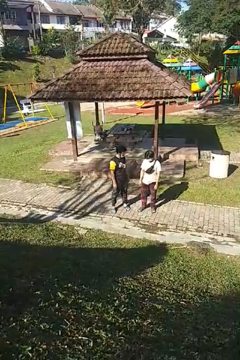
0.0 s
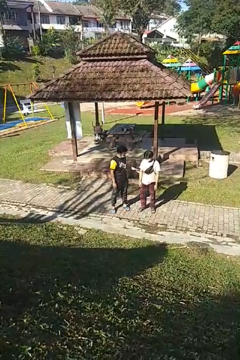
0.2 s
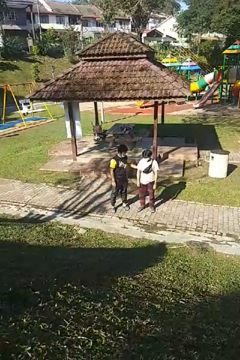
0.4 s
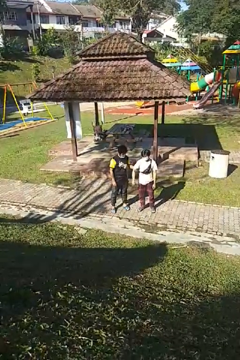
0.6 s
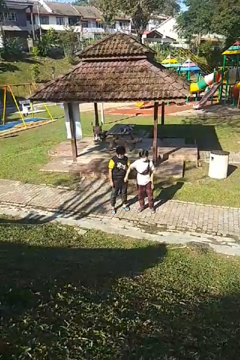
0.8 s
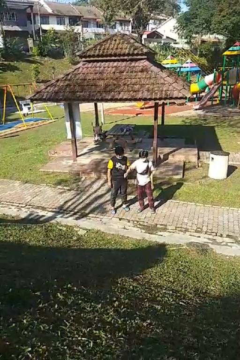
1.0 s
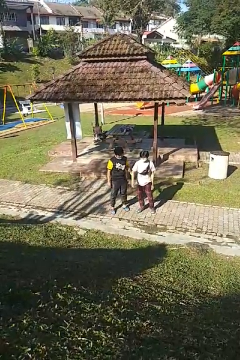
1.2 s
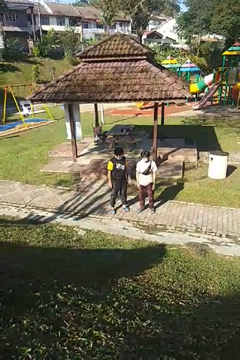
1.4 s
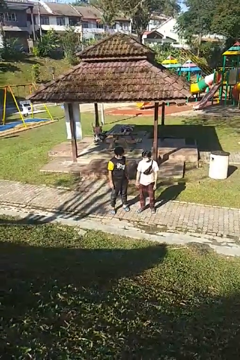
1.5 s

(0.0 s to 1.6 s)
person grabs person by hair

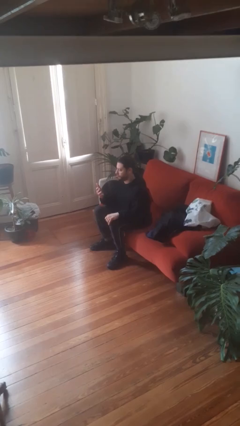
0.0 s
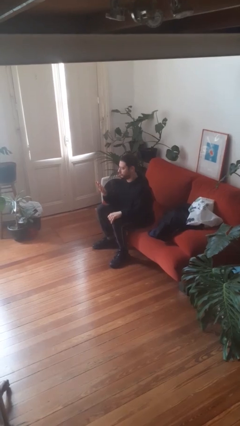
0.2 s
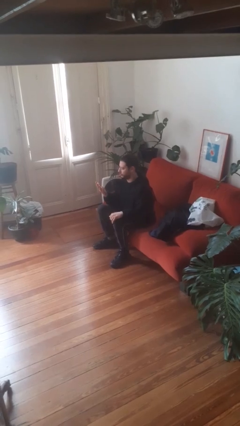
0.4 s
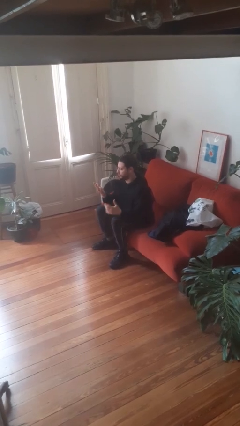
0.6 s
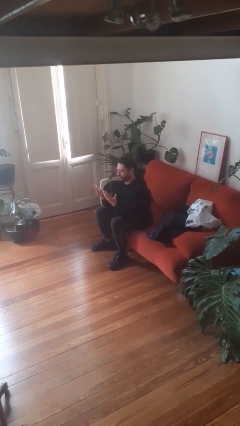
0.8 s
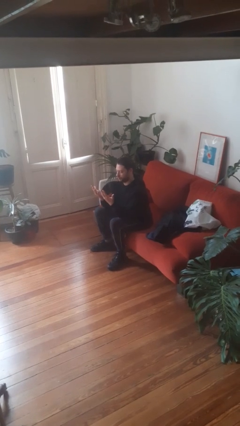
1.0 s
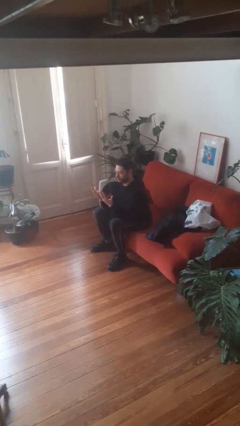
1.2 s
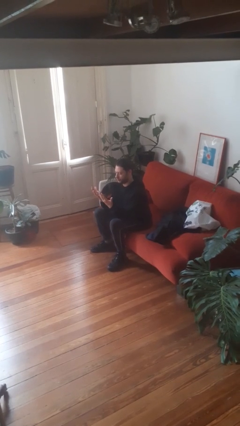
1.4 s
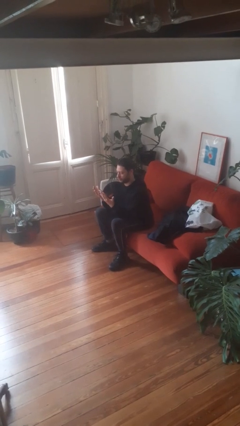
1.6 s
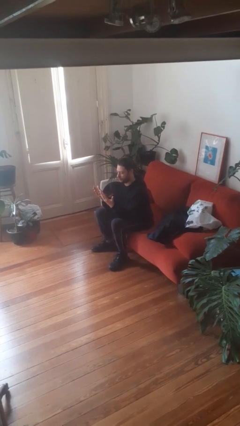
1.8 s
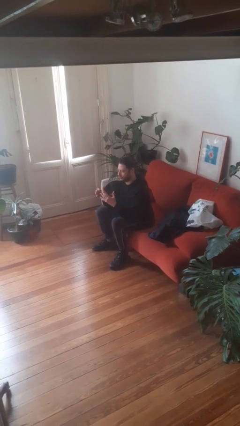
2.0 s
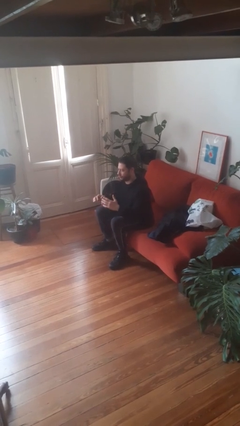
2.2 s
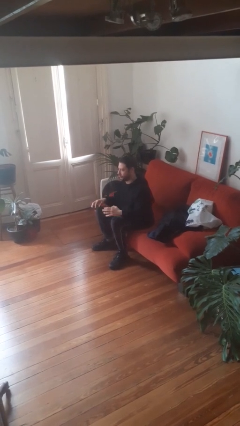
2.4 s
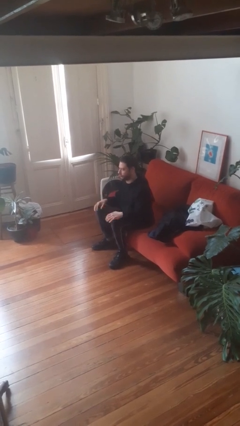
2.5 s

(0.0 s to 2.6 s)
person looks at hands in lap

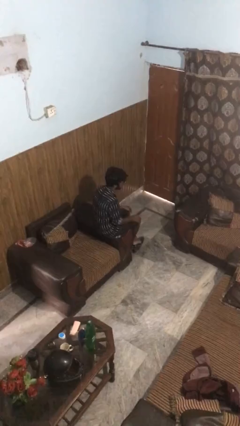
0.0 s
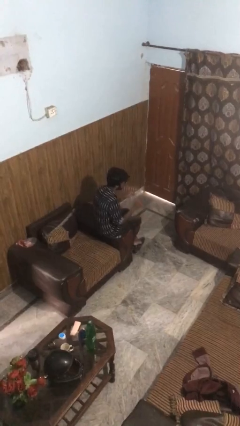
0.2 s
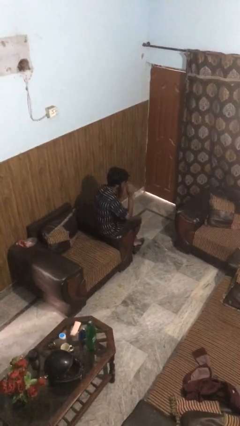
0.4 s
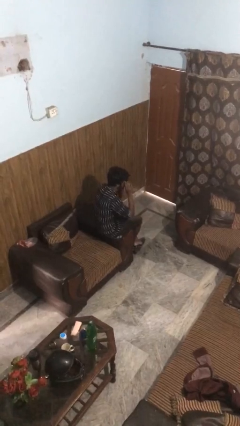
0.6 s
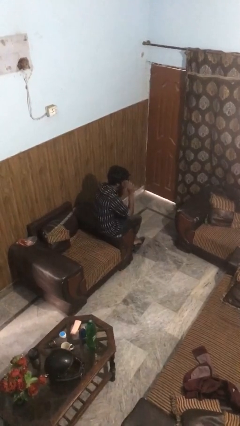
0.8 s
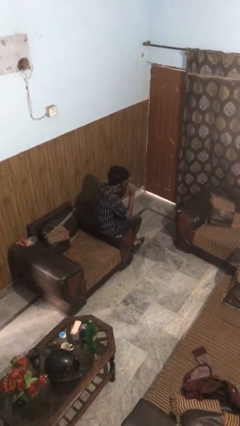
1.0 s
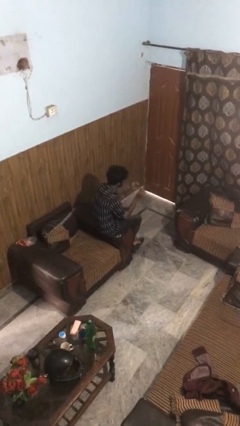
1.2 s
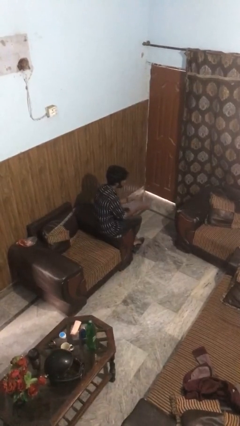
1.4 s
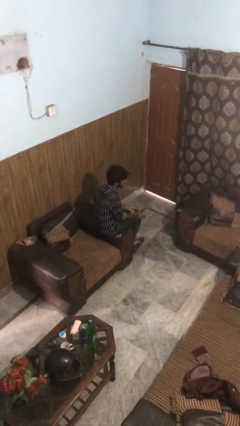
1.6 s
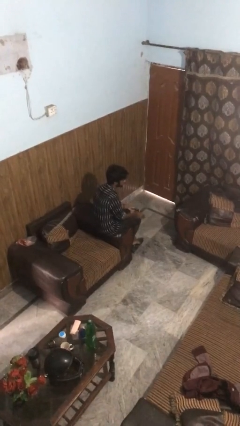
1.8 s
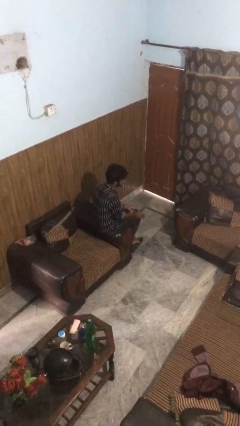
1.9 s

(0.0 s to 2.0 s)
person takes off sunglasses

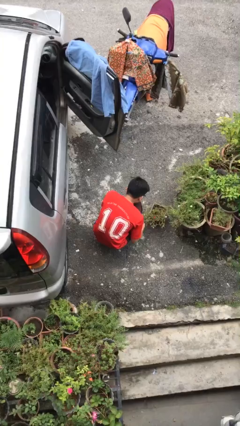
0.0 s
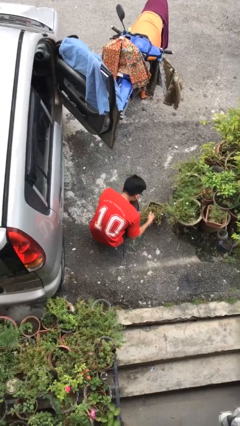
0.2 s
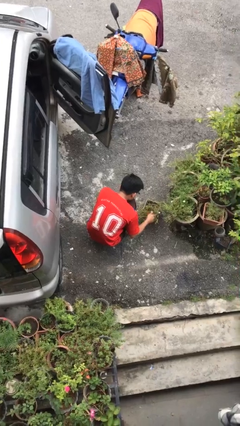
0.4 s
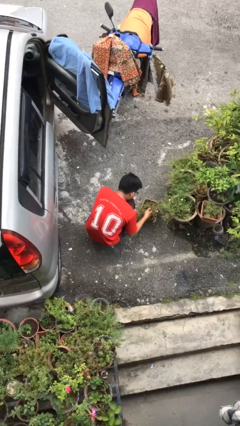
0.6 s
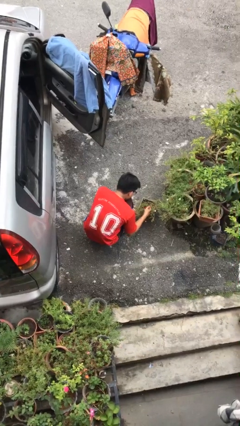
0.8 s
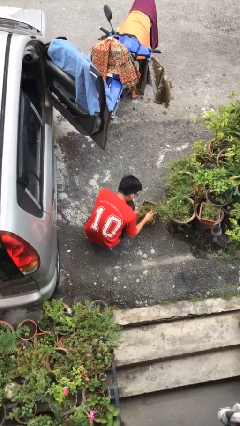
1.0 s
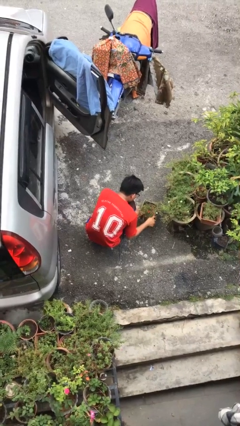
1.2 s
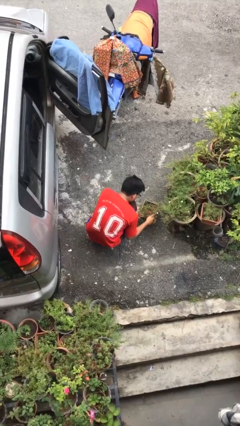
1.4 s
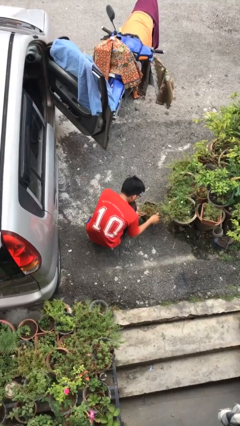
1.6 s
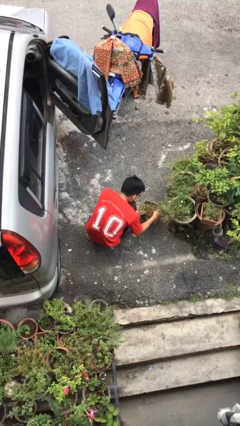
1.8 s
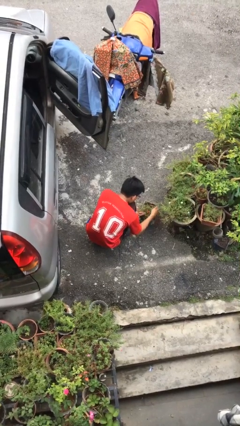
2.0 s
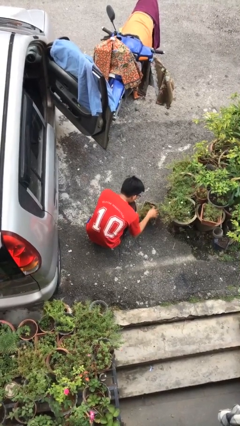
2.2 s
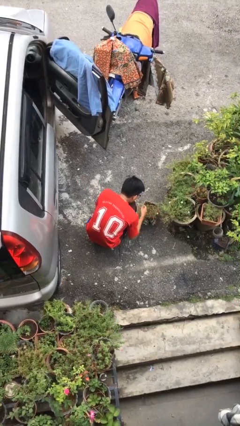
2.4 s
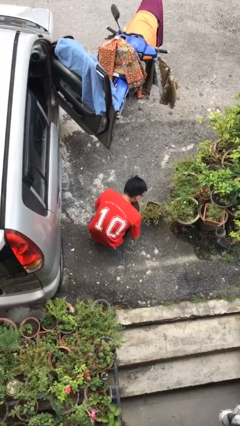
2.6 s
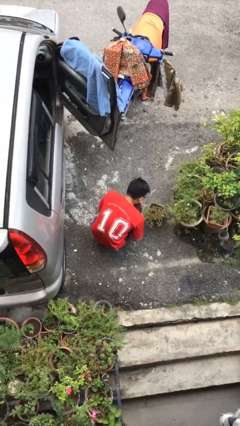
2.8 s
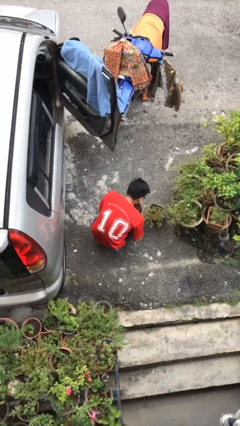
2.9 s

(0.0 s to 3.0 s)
person arranges flowers in vase

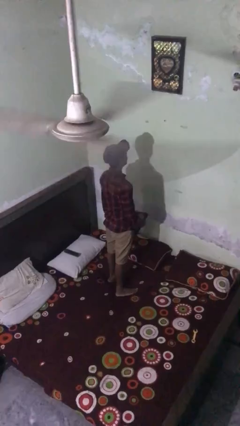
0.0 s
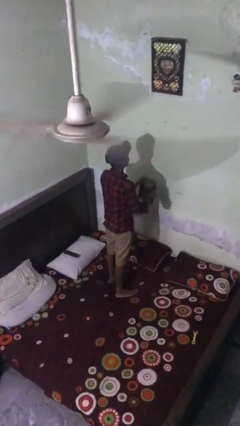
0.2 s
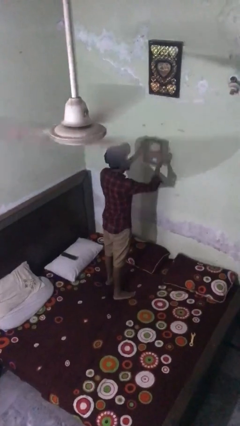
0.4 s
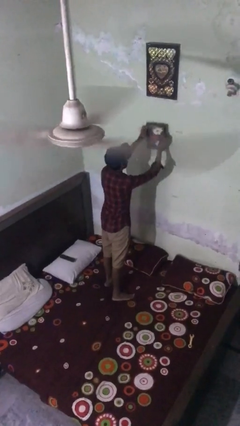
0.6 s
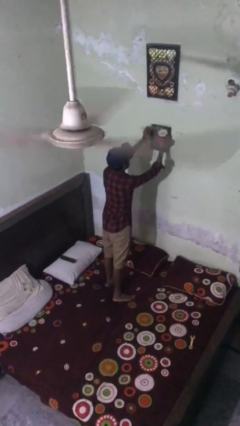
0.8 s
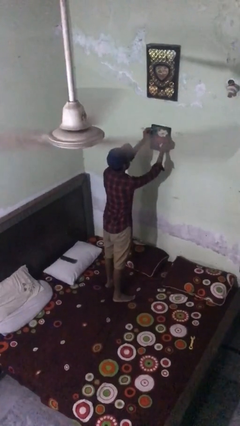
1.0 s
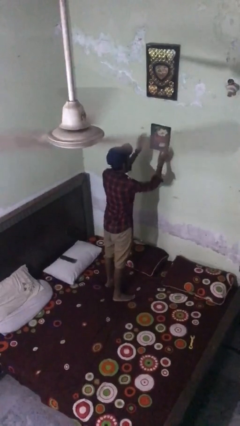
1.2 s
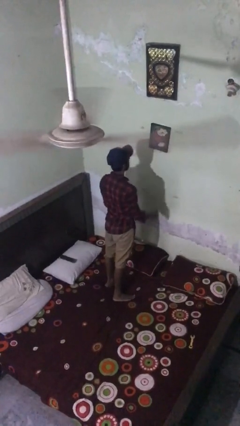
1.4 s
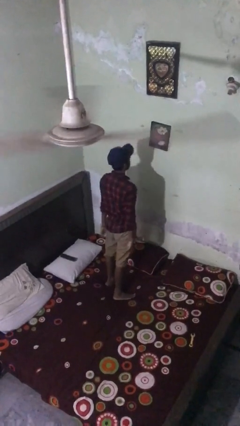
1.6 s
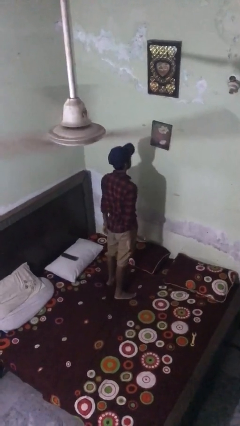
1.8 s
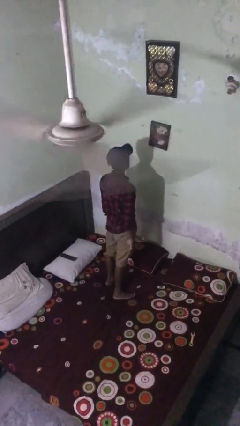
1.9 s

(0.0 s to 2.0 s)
person puts up picture frame

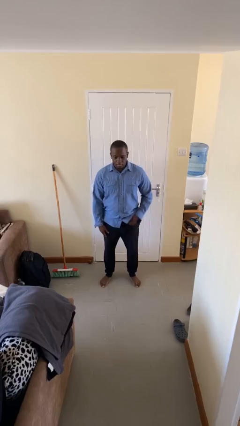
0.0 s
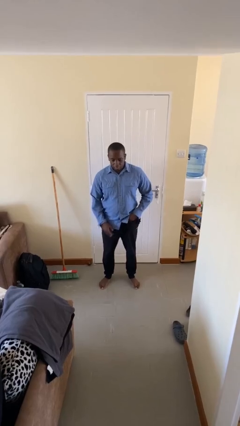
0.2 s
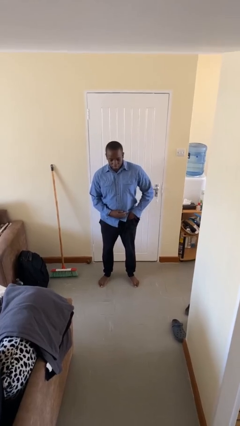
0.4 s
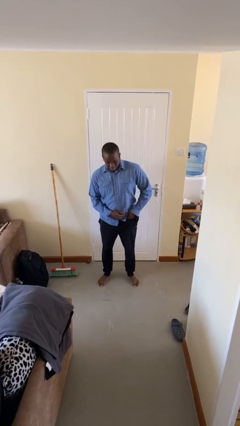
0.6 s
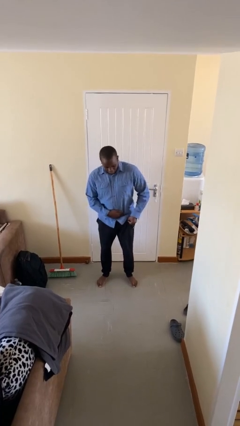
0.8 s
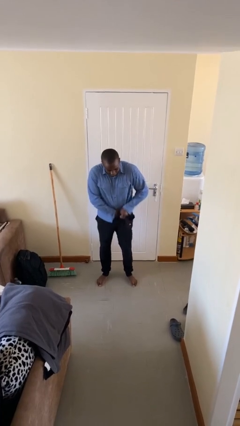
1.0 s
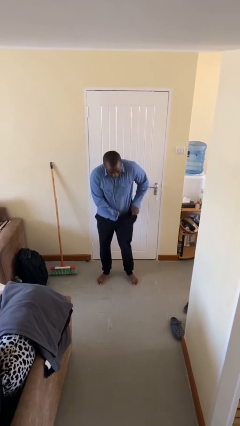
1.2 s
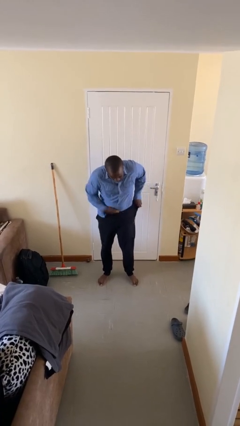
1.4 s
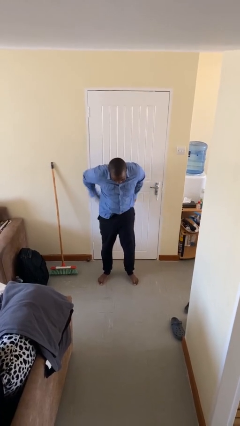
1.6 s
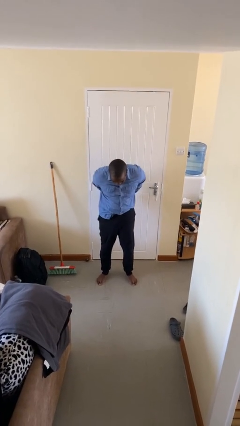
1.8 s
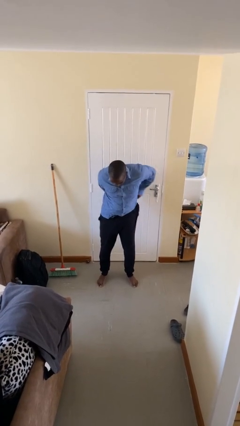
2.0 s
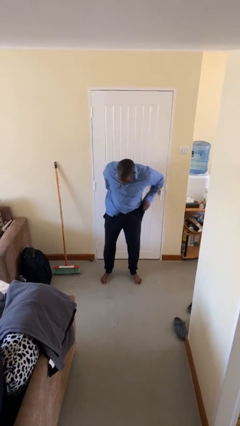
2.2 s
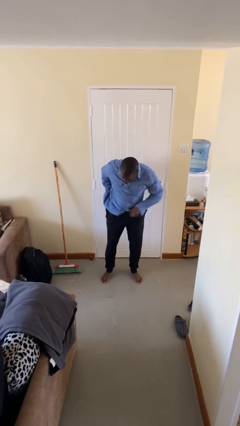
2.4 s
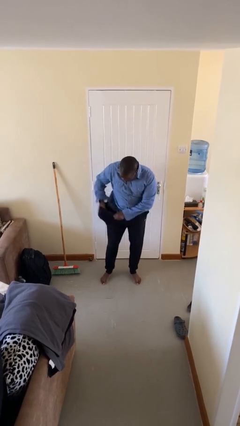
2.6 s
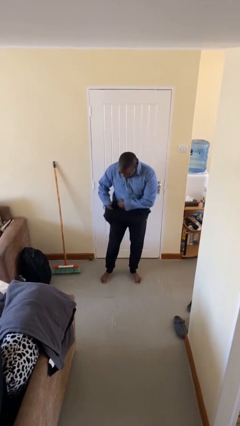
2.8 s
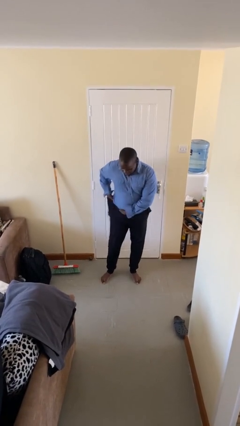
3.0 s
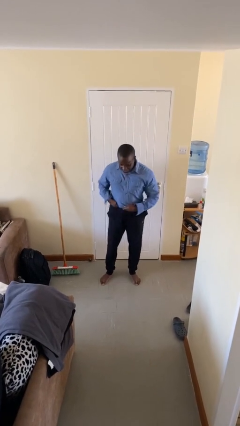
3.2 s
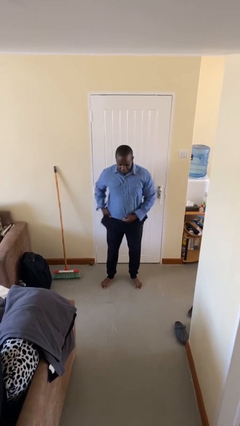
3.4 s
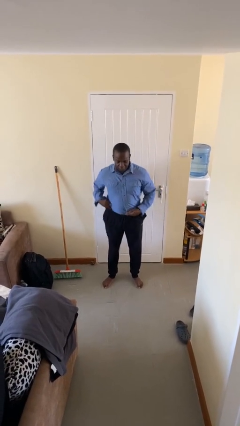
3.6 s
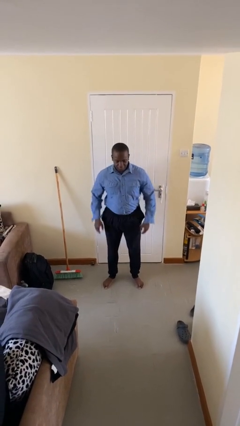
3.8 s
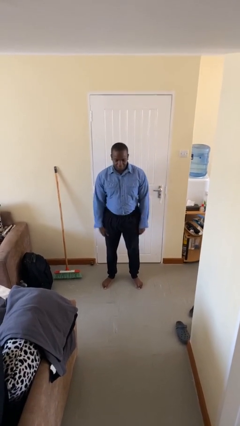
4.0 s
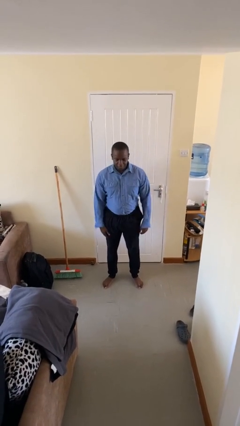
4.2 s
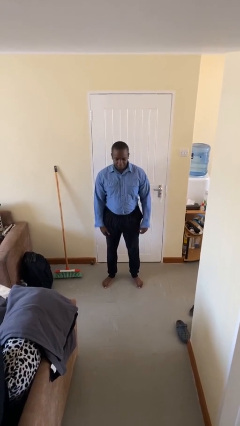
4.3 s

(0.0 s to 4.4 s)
person tucks in shirt

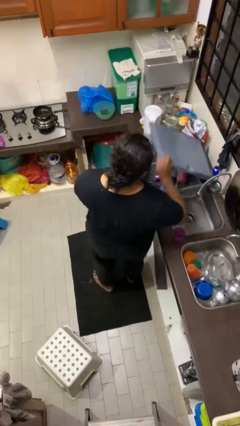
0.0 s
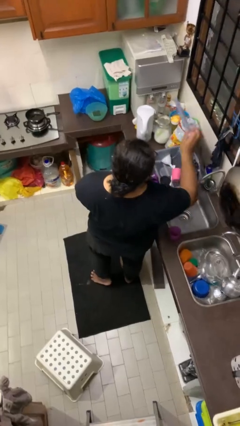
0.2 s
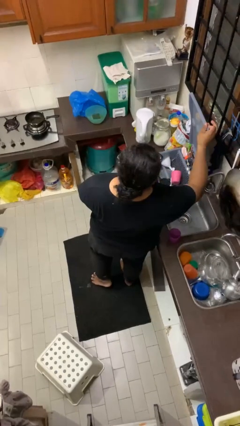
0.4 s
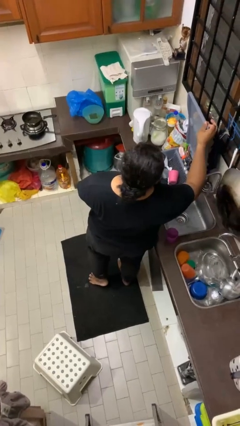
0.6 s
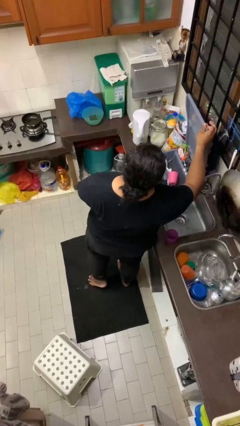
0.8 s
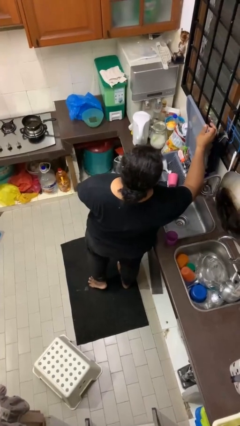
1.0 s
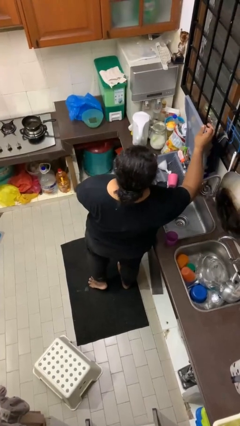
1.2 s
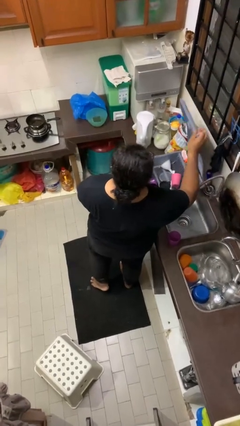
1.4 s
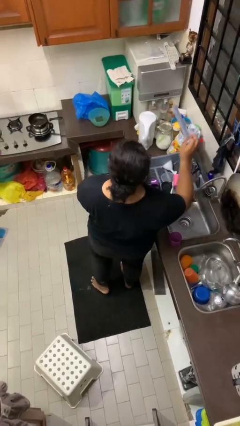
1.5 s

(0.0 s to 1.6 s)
person opens dishwasher
